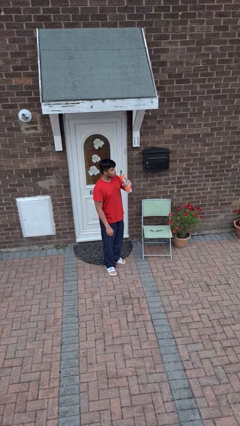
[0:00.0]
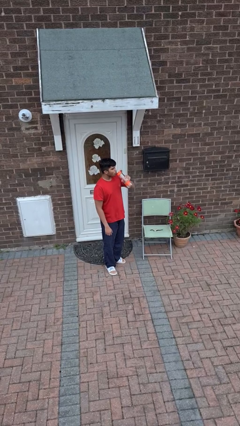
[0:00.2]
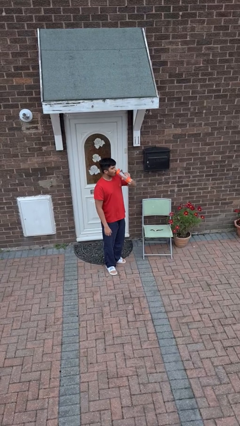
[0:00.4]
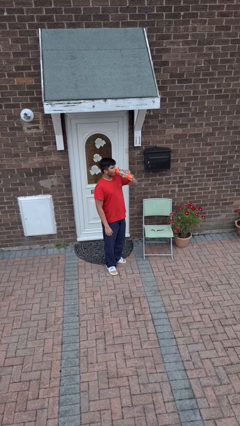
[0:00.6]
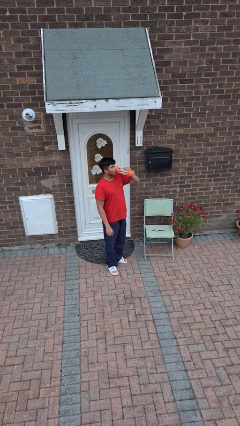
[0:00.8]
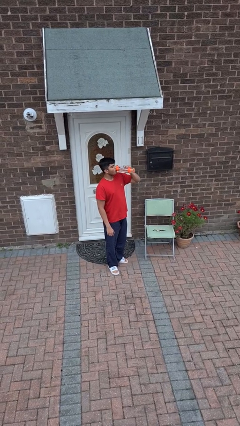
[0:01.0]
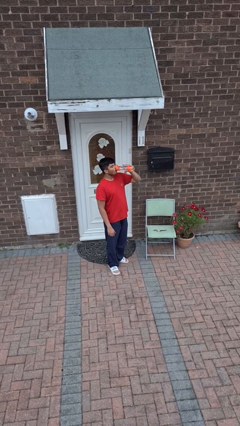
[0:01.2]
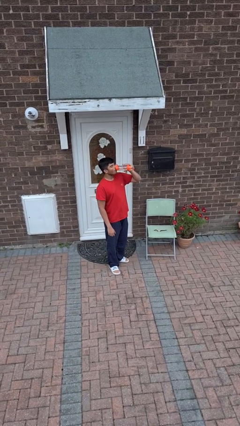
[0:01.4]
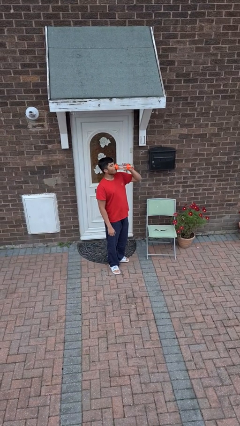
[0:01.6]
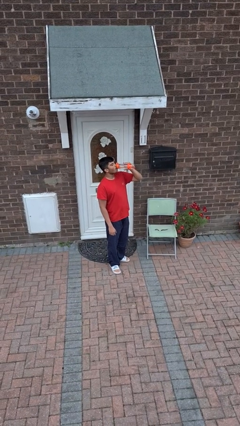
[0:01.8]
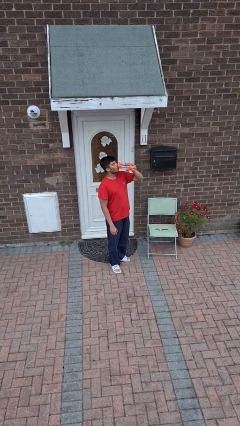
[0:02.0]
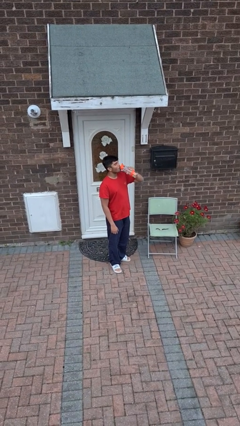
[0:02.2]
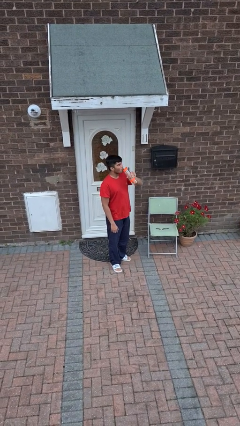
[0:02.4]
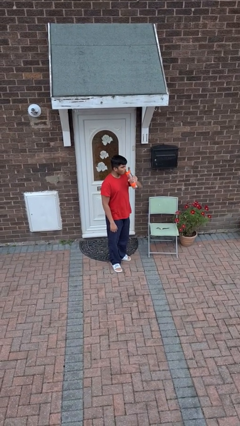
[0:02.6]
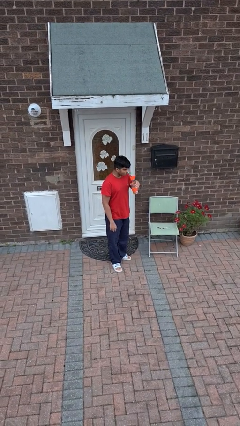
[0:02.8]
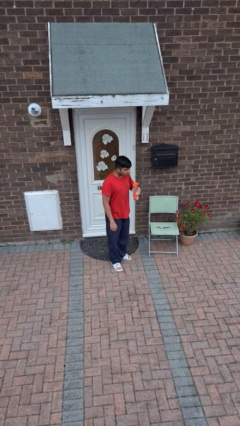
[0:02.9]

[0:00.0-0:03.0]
person drinks from bottle

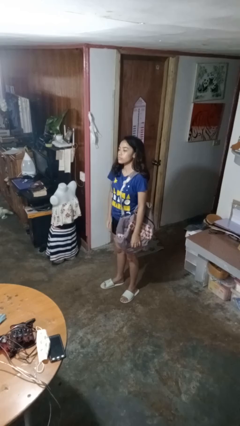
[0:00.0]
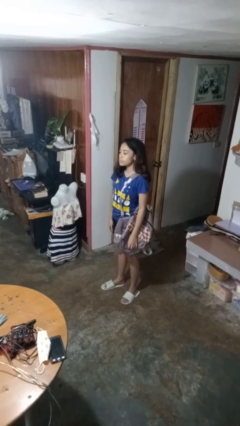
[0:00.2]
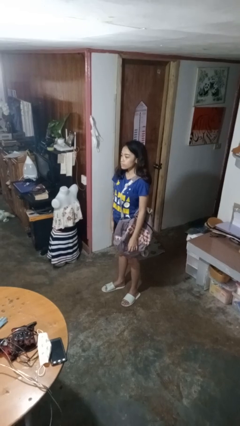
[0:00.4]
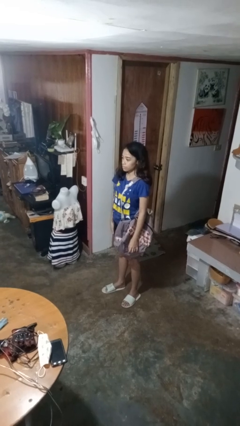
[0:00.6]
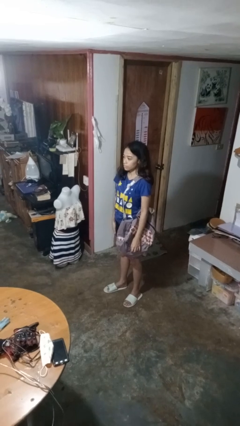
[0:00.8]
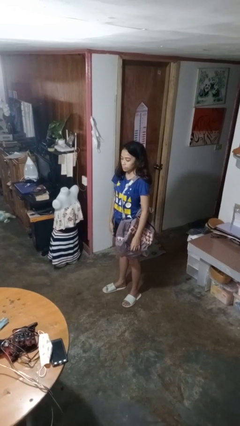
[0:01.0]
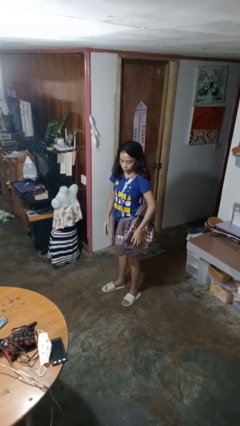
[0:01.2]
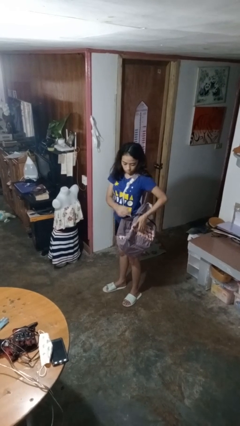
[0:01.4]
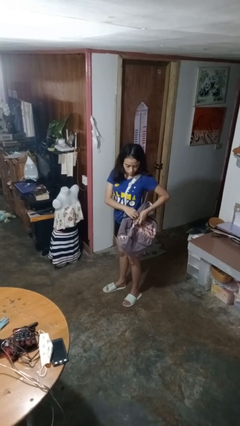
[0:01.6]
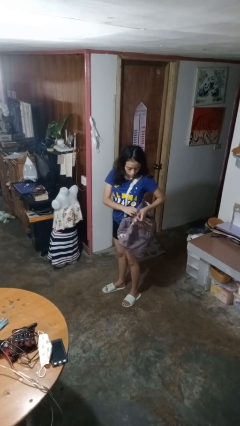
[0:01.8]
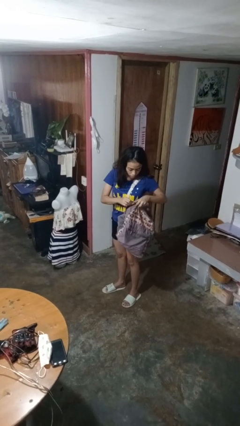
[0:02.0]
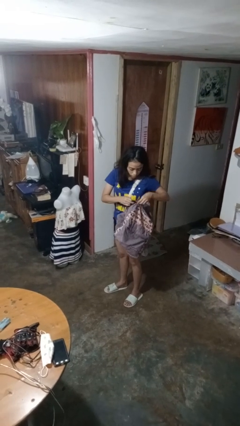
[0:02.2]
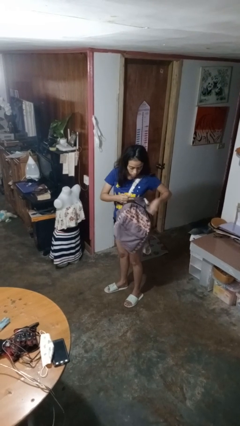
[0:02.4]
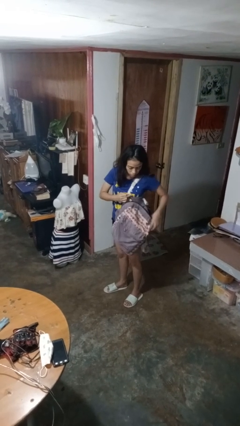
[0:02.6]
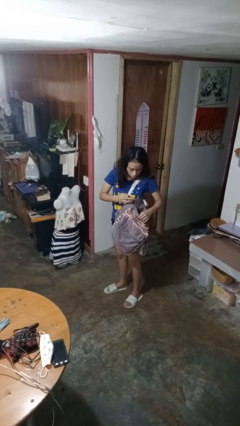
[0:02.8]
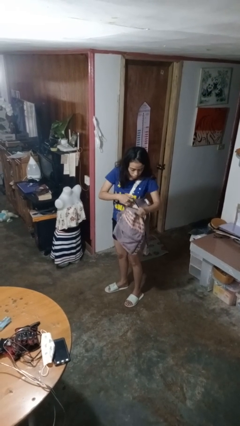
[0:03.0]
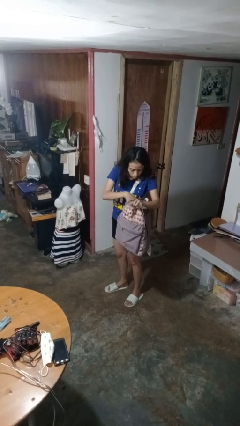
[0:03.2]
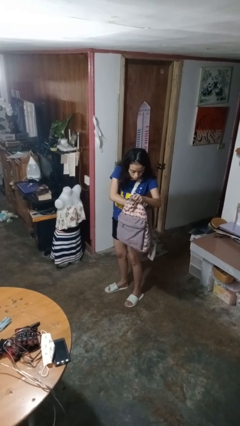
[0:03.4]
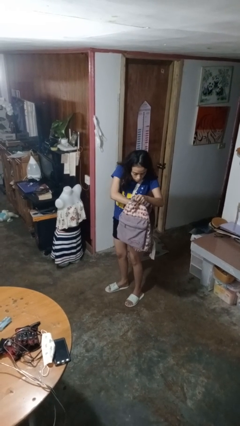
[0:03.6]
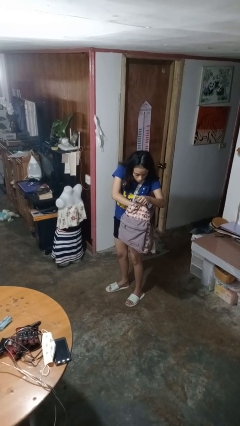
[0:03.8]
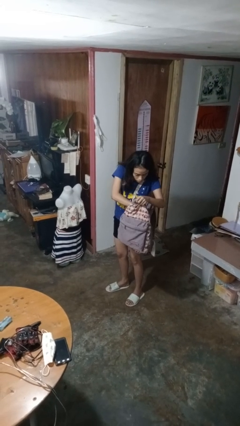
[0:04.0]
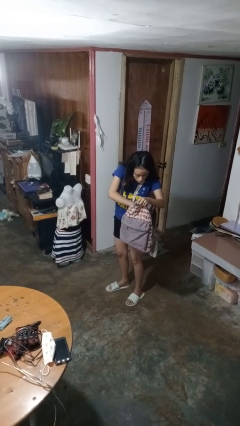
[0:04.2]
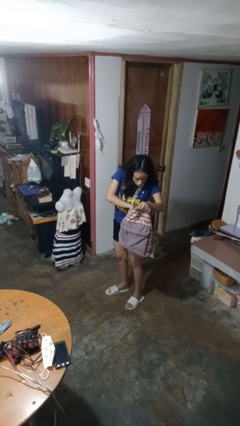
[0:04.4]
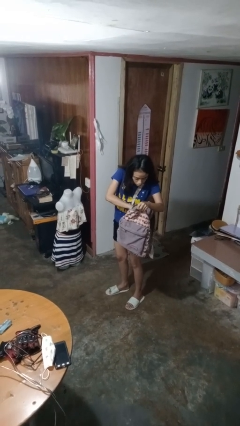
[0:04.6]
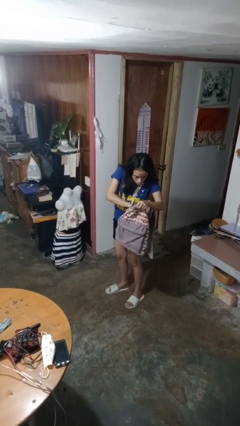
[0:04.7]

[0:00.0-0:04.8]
person searches in backpack

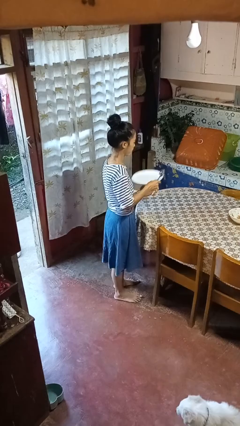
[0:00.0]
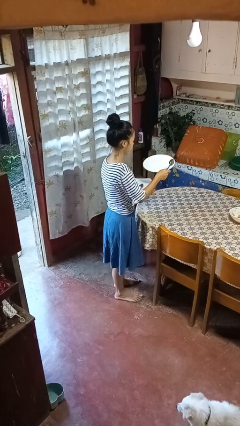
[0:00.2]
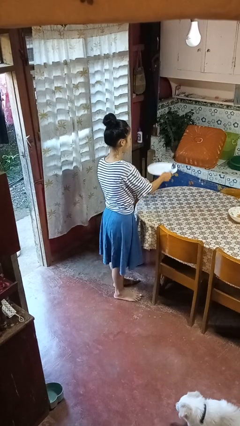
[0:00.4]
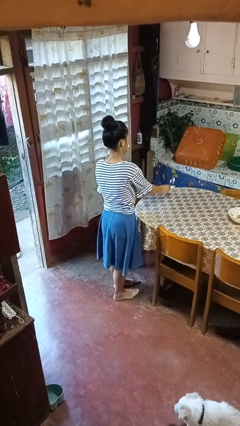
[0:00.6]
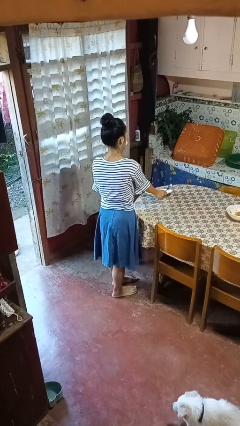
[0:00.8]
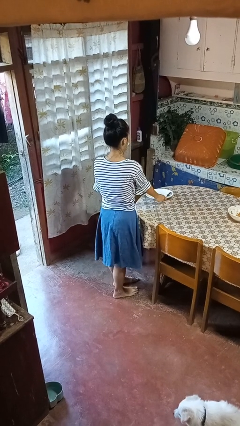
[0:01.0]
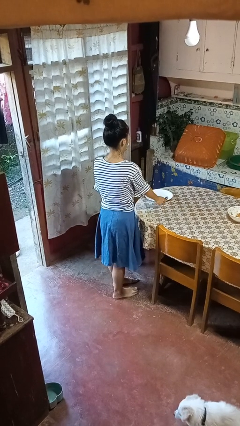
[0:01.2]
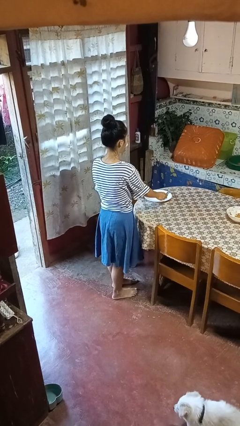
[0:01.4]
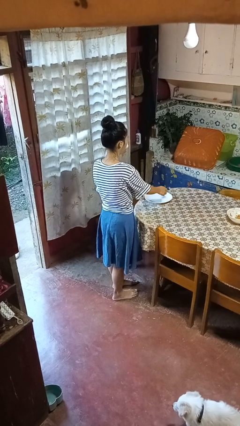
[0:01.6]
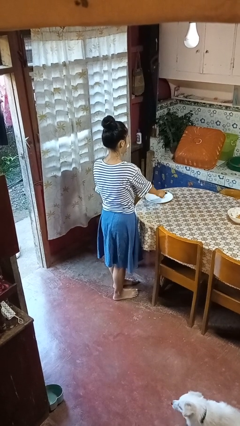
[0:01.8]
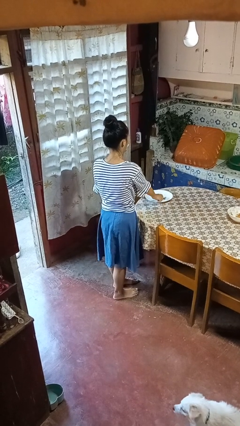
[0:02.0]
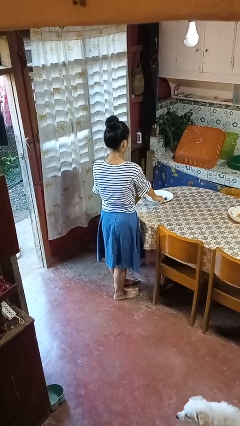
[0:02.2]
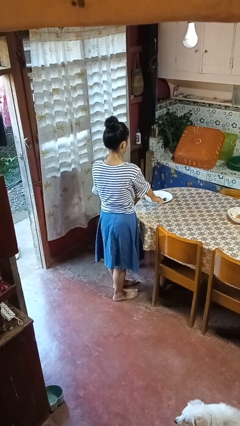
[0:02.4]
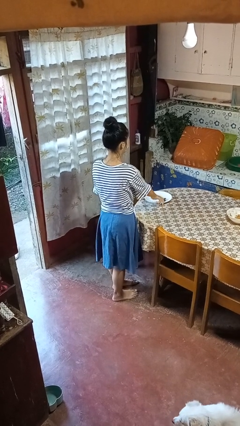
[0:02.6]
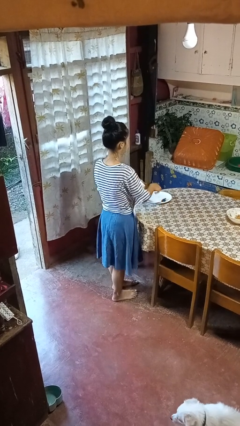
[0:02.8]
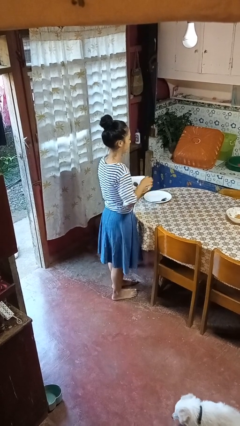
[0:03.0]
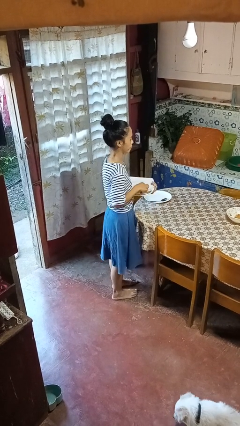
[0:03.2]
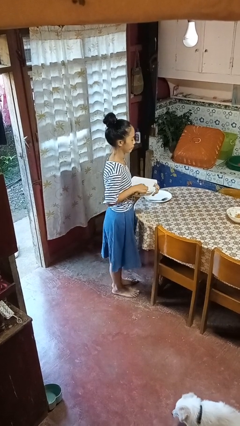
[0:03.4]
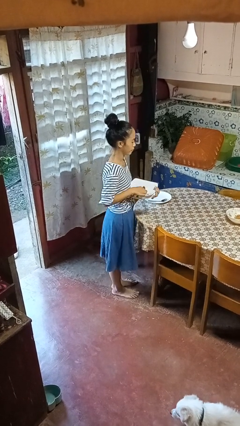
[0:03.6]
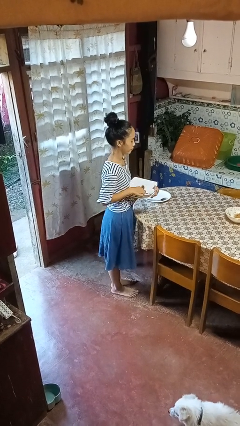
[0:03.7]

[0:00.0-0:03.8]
person sets table

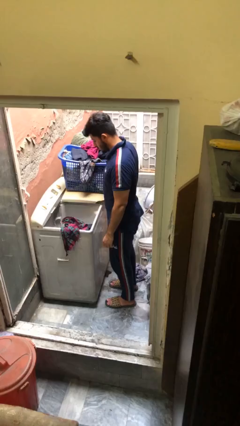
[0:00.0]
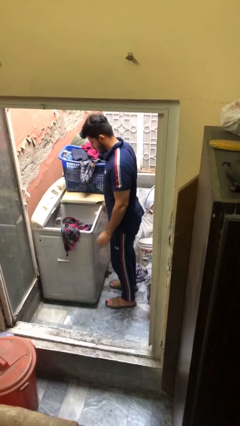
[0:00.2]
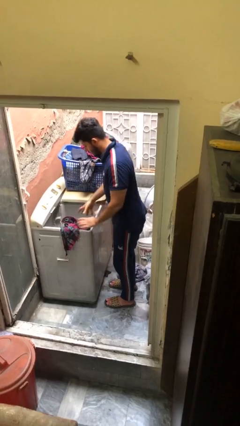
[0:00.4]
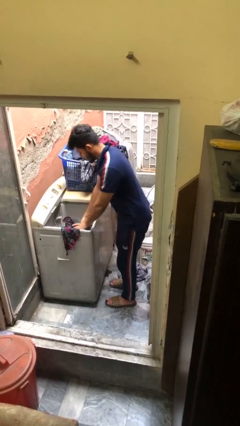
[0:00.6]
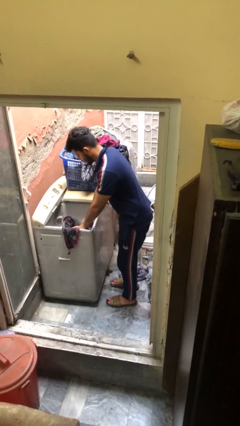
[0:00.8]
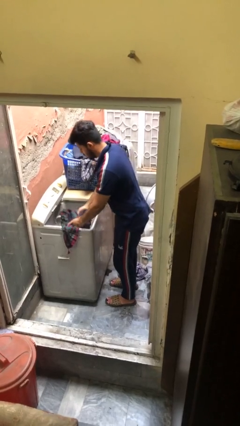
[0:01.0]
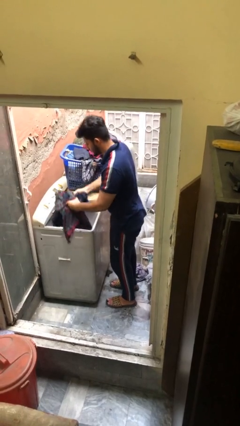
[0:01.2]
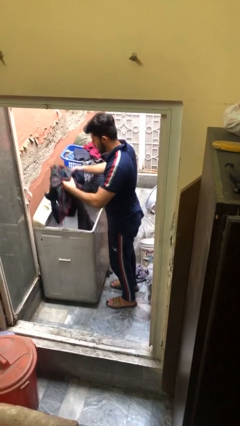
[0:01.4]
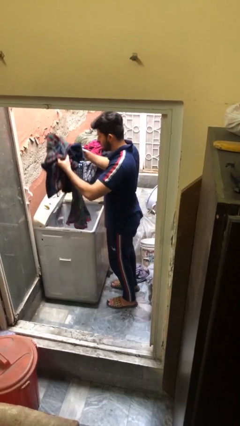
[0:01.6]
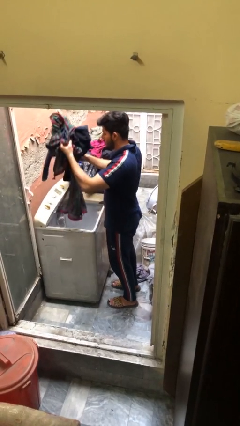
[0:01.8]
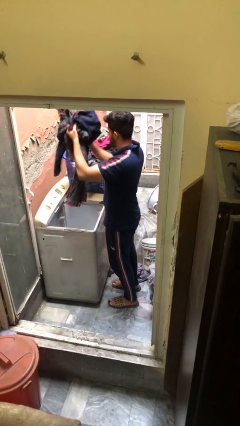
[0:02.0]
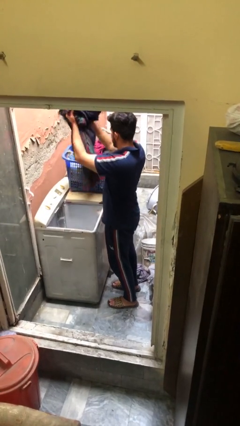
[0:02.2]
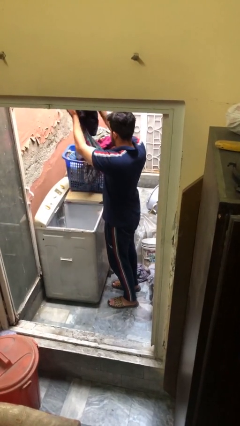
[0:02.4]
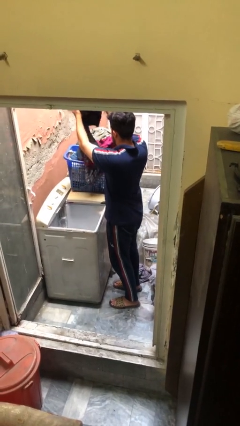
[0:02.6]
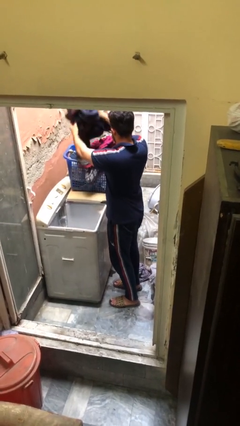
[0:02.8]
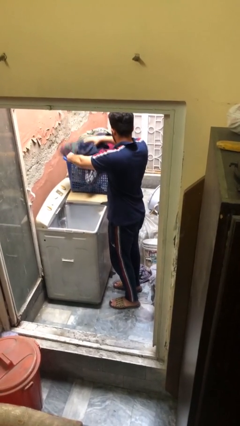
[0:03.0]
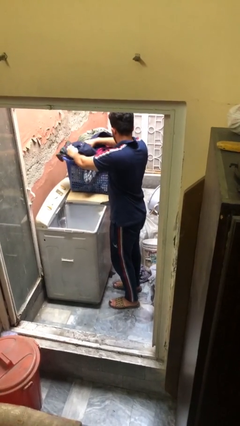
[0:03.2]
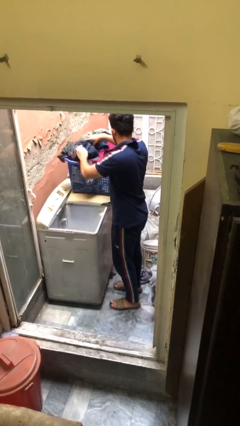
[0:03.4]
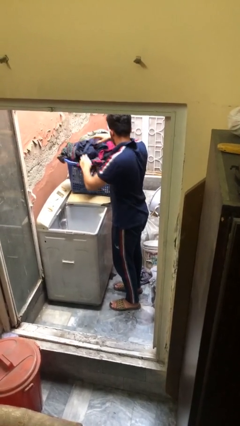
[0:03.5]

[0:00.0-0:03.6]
person loads clotheswasher

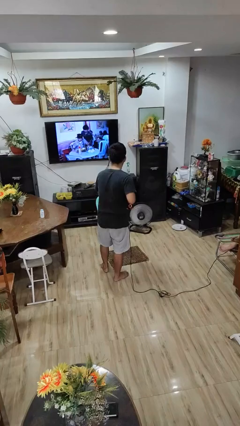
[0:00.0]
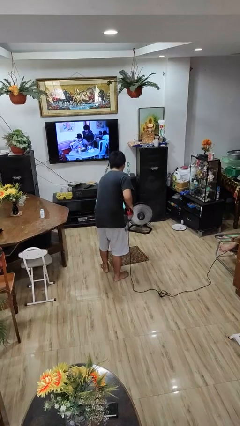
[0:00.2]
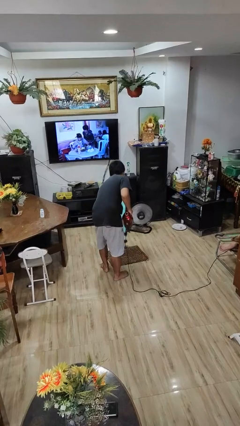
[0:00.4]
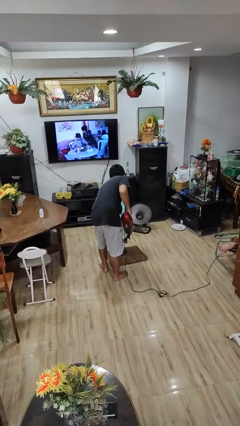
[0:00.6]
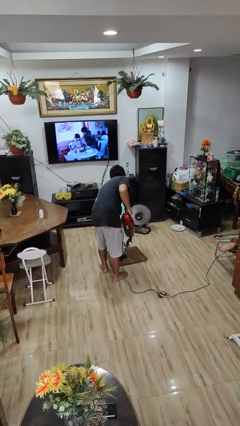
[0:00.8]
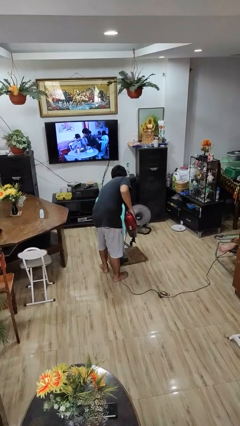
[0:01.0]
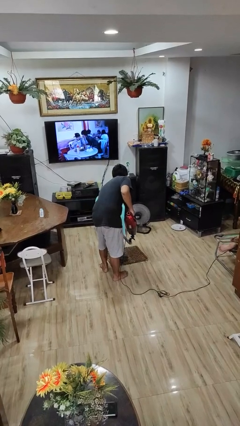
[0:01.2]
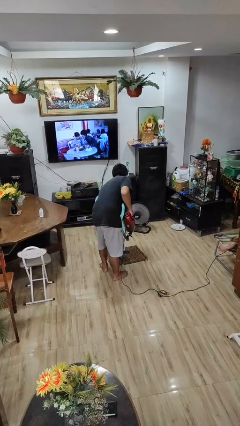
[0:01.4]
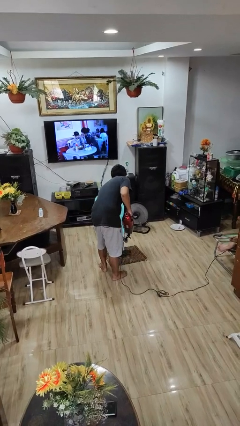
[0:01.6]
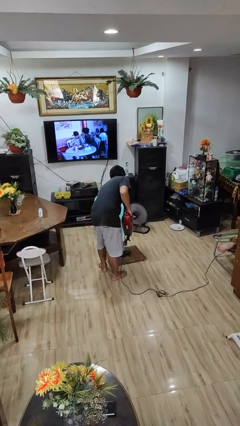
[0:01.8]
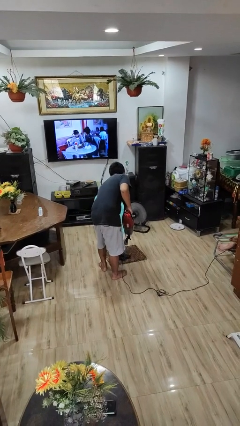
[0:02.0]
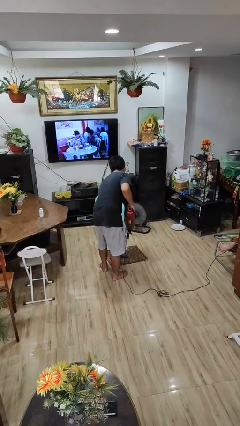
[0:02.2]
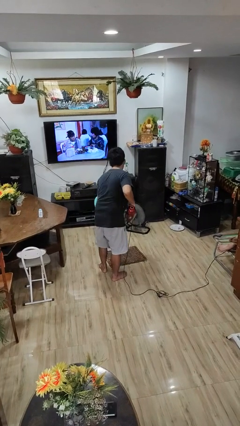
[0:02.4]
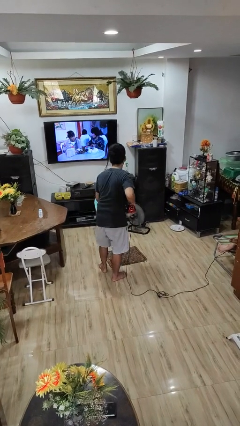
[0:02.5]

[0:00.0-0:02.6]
person vacuums carpet
